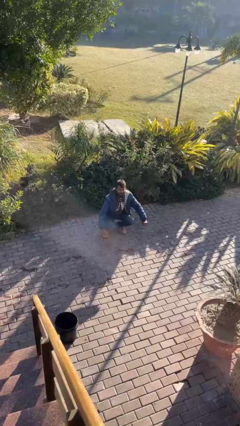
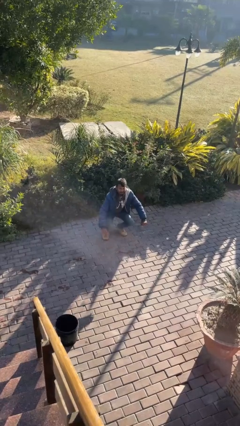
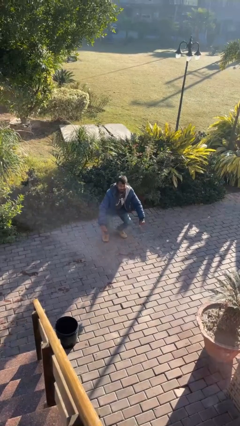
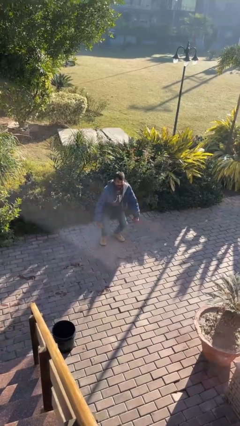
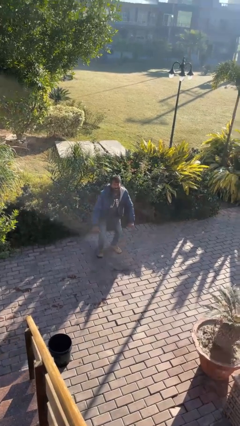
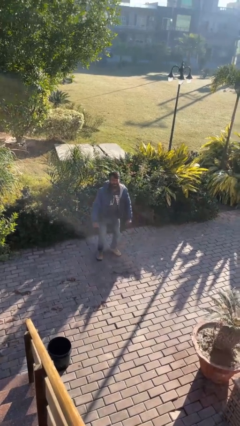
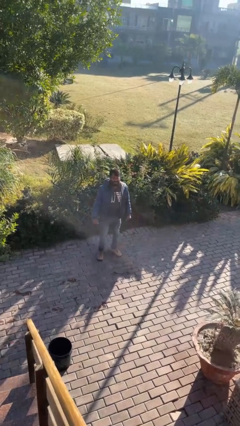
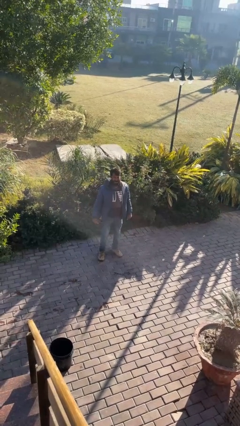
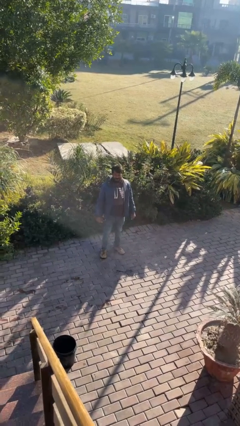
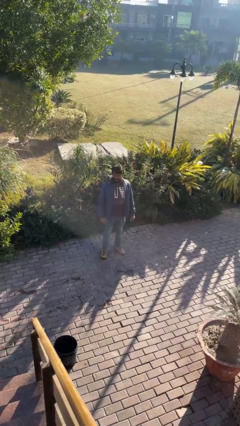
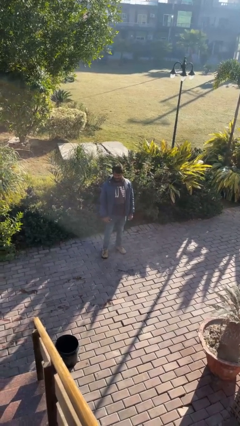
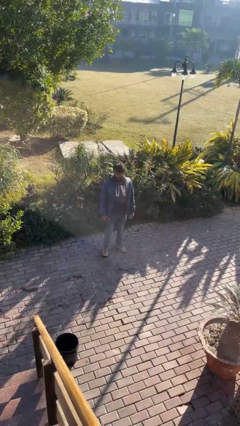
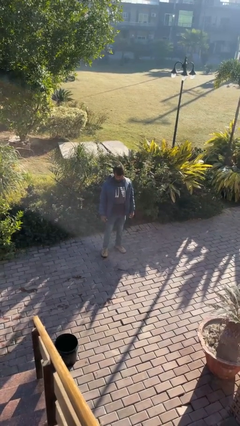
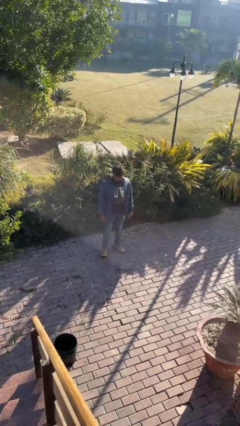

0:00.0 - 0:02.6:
person stands up

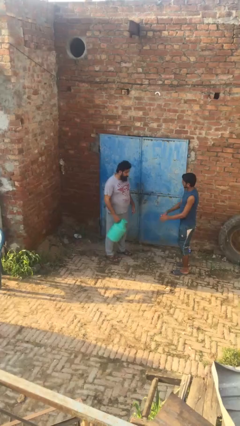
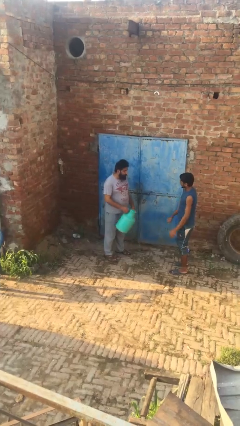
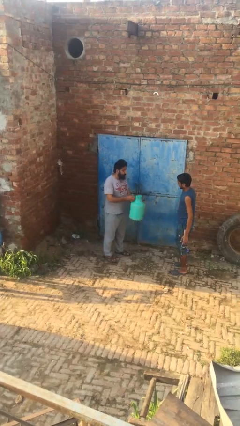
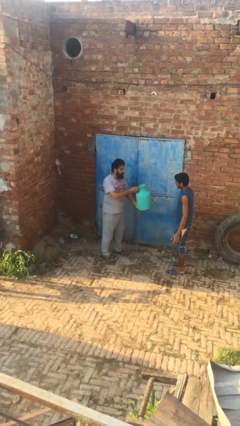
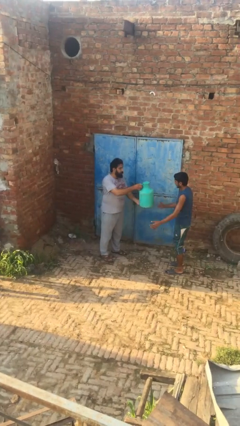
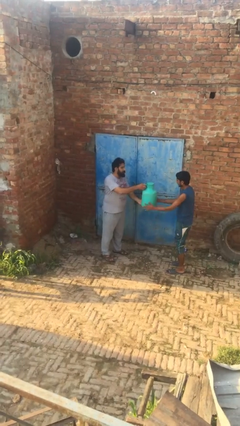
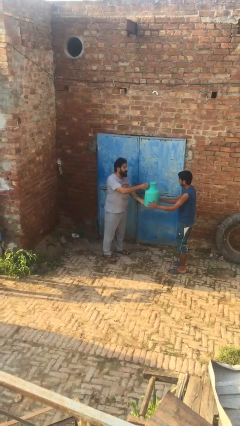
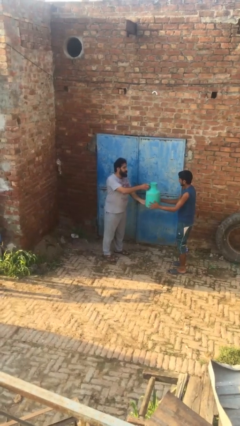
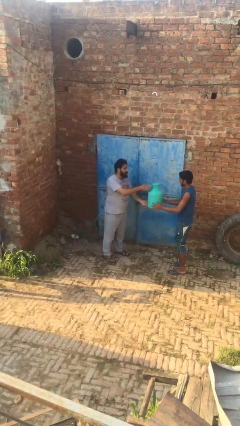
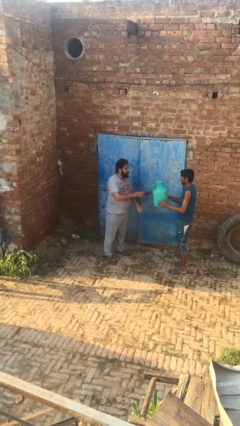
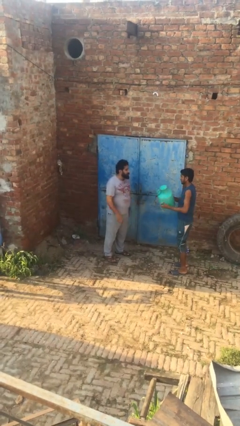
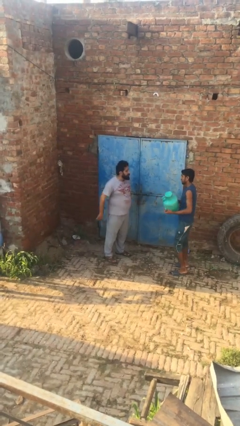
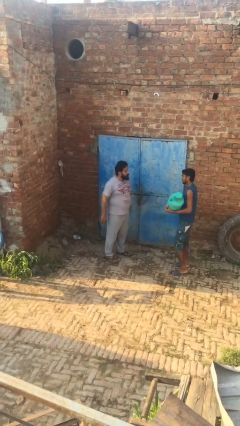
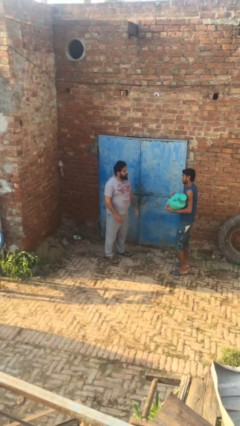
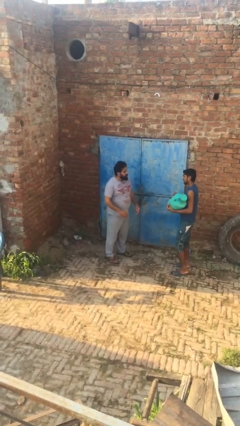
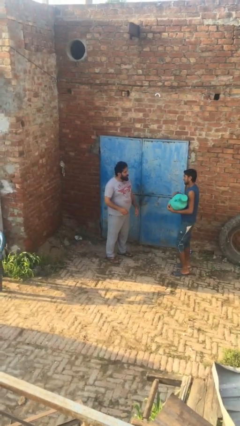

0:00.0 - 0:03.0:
person transfers object to person

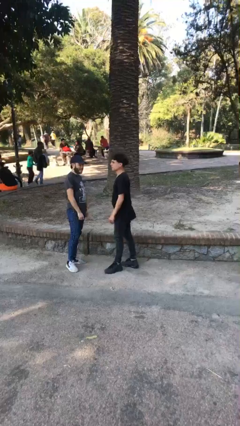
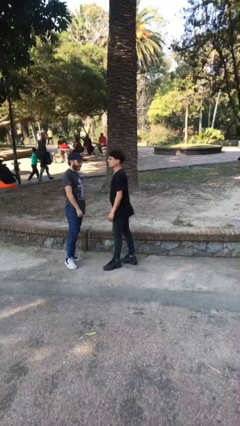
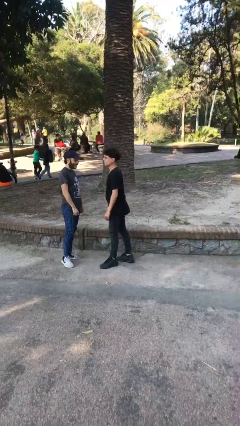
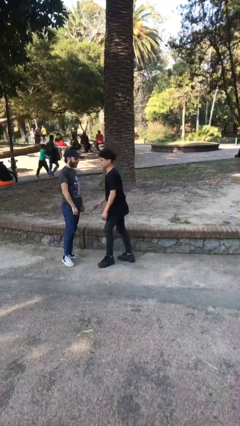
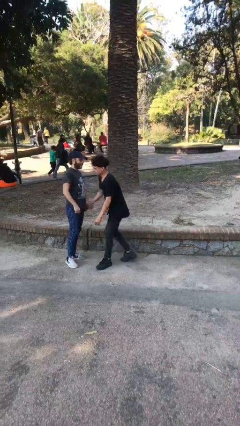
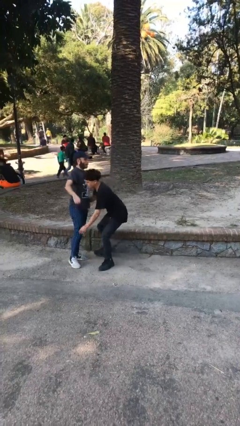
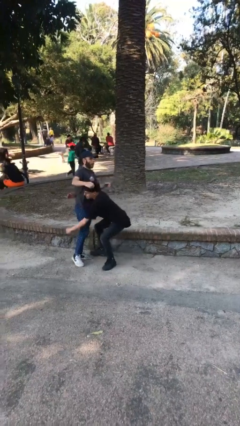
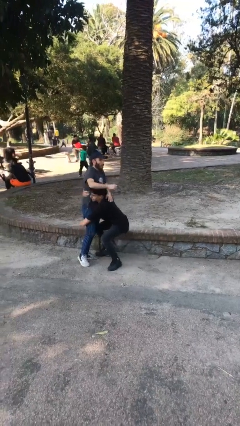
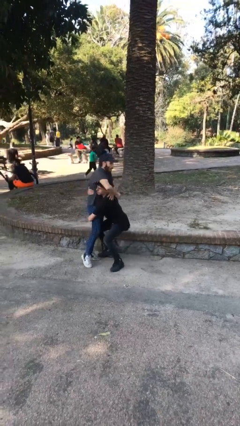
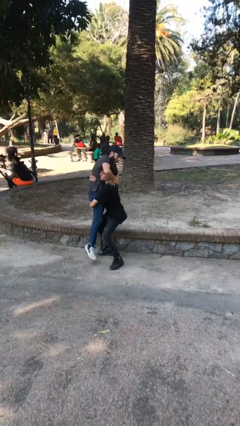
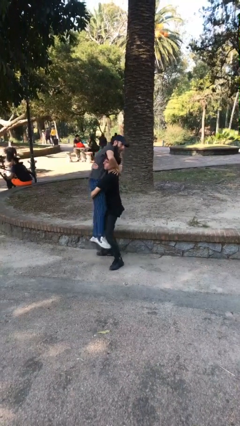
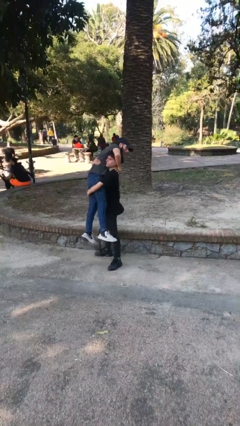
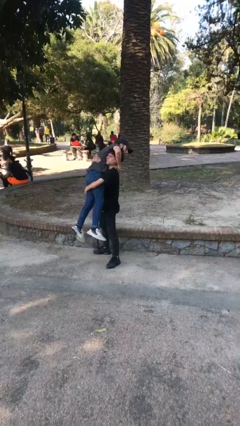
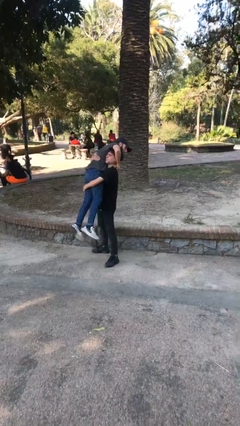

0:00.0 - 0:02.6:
person picks up person

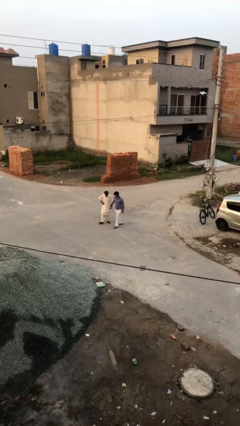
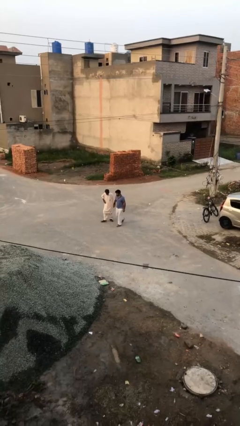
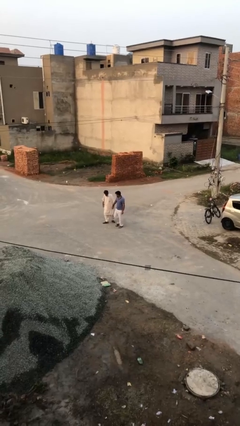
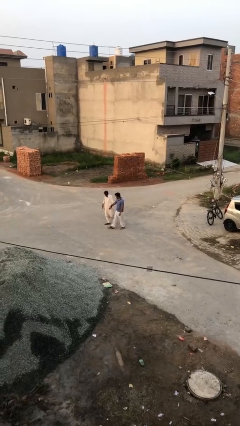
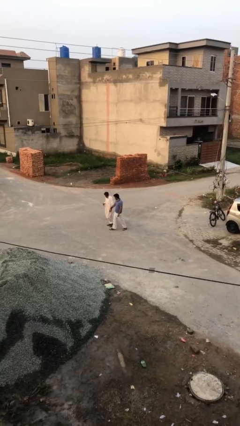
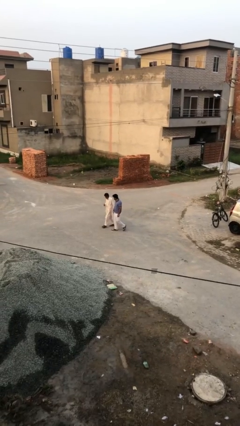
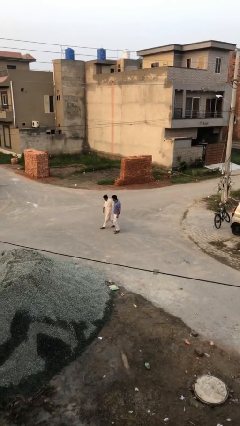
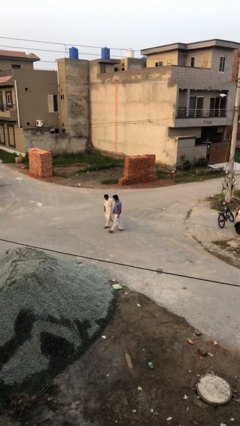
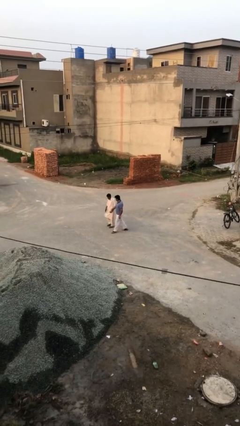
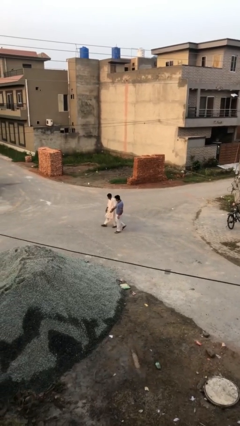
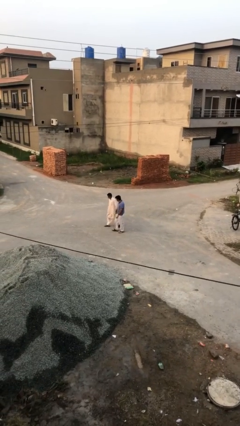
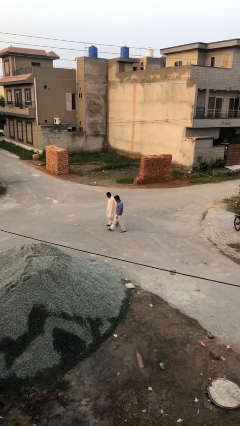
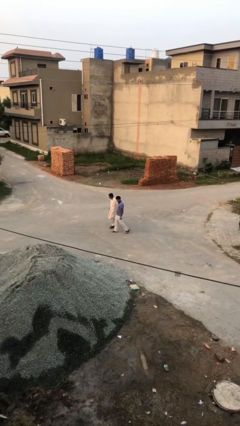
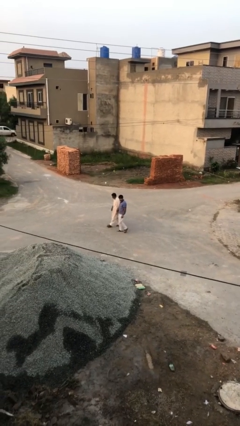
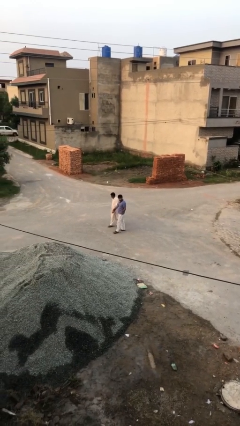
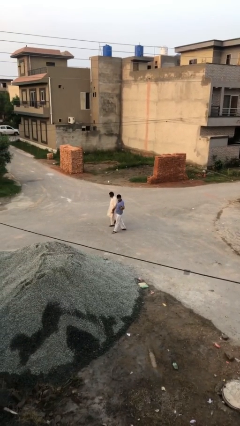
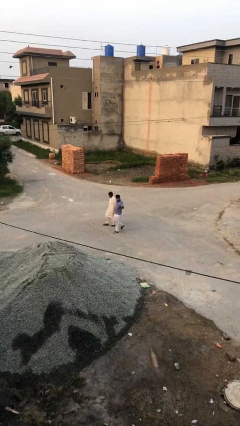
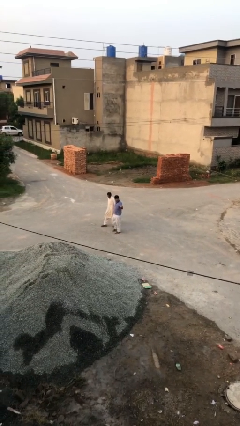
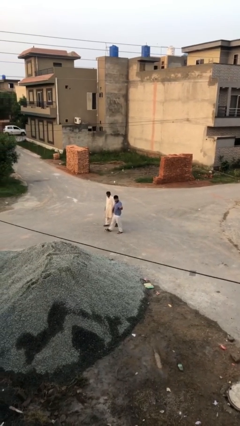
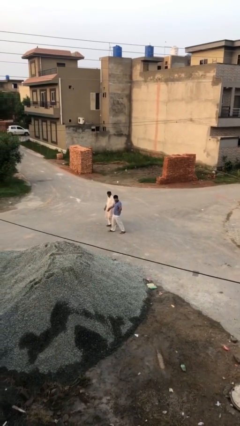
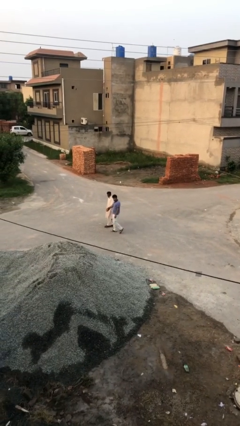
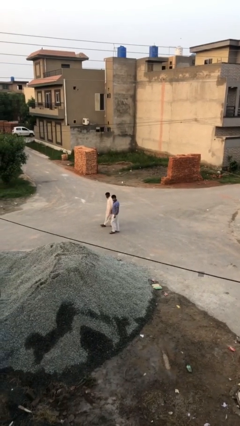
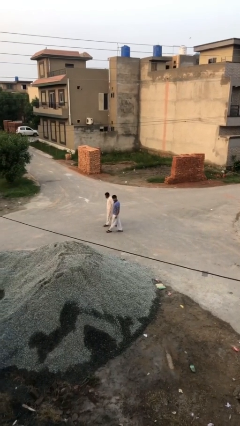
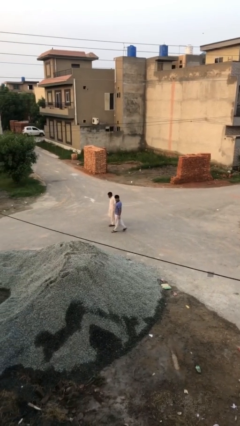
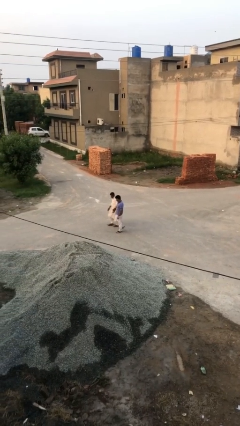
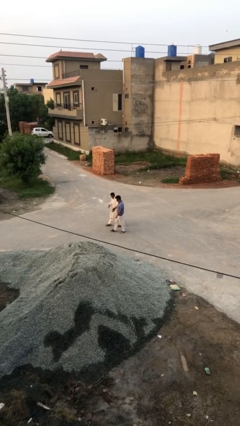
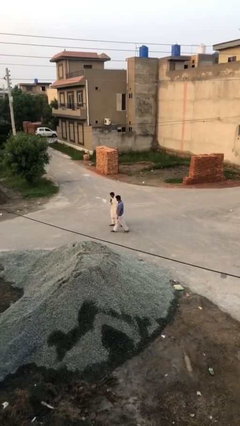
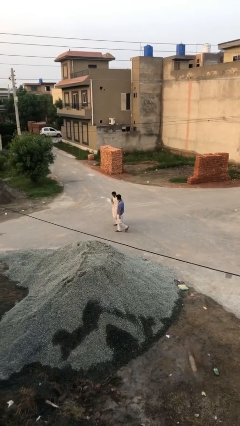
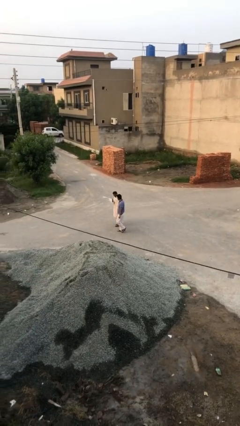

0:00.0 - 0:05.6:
person holds hand

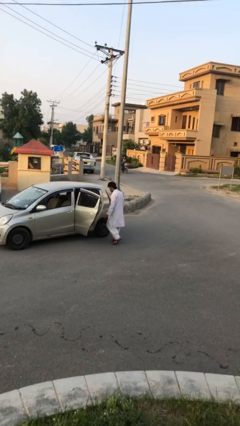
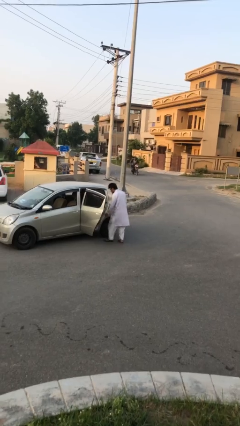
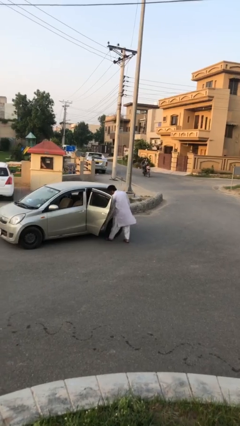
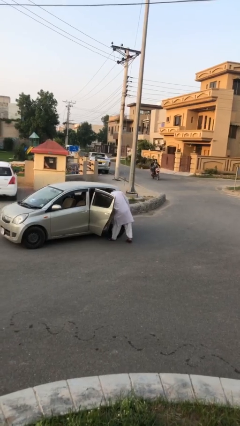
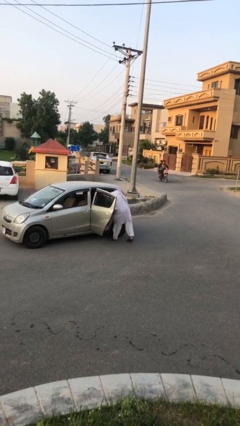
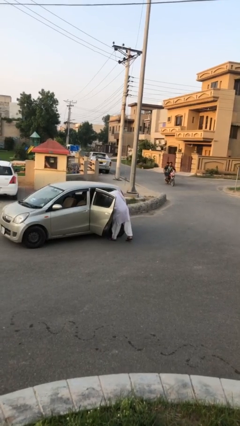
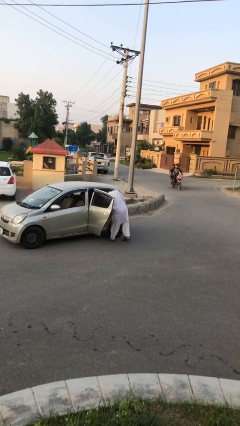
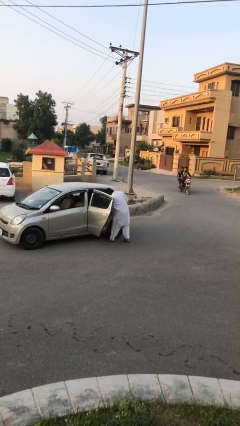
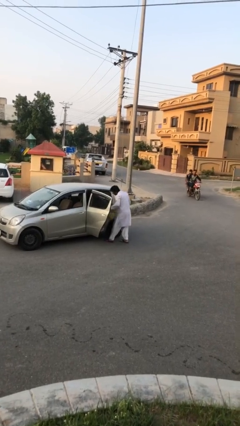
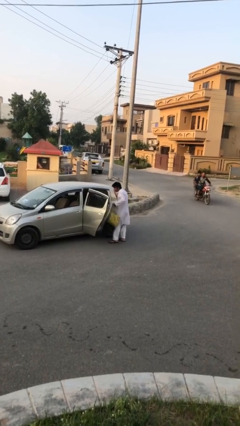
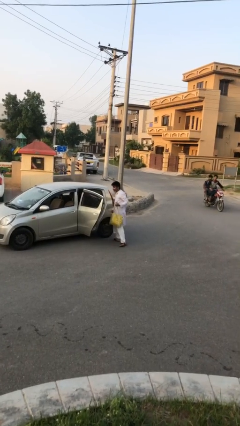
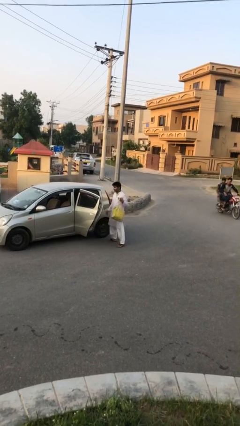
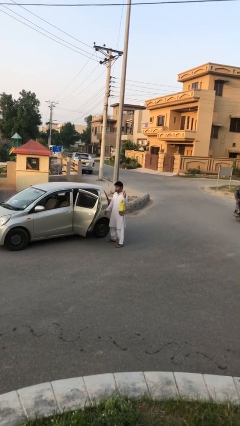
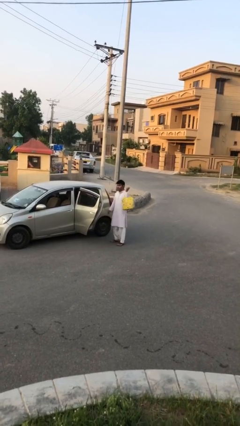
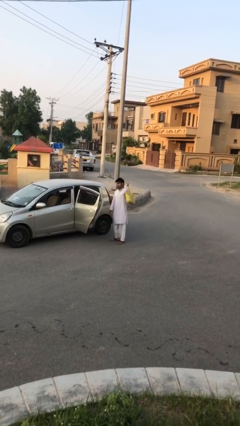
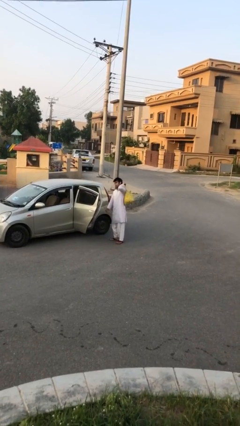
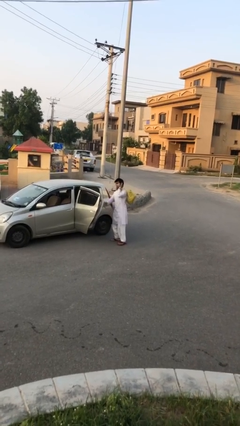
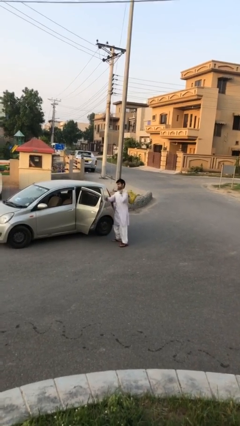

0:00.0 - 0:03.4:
person unloads car

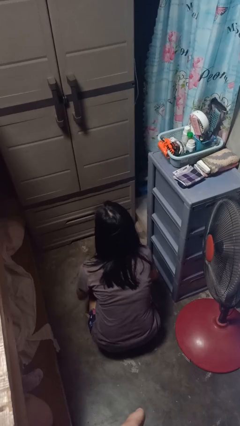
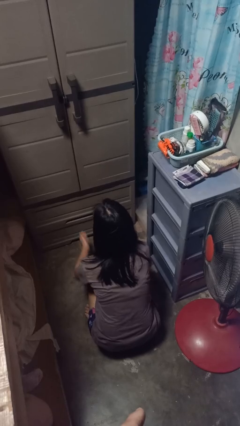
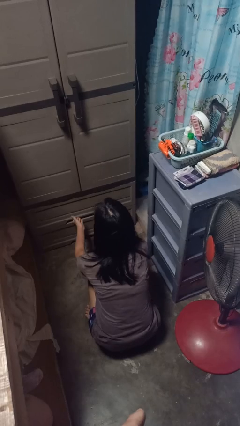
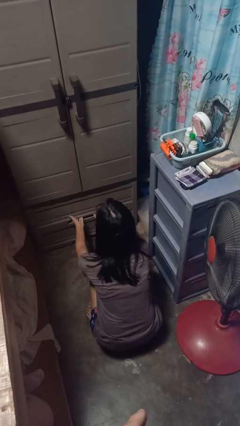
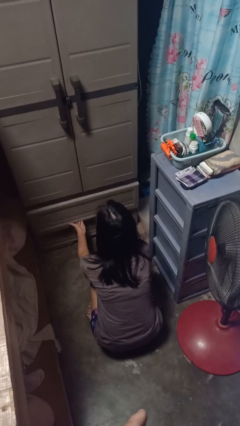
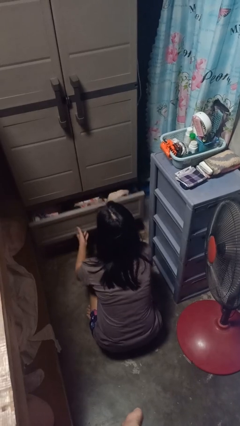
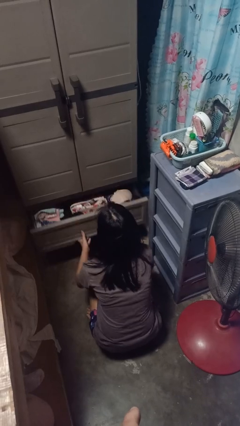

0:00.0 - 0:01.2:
person opens dresser drawer
